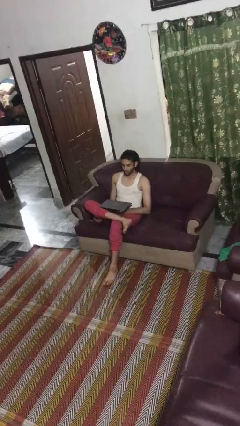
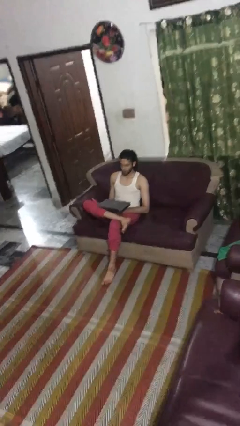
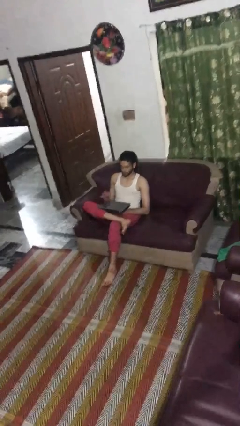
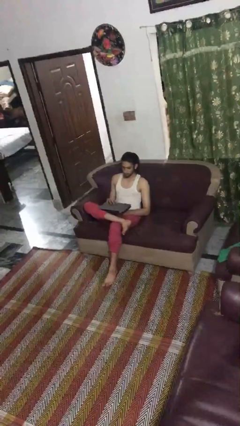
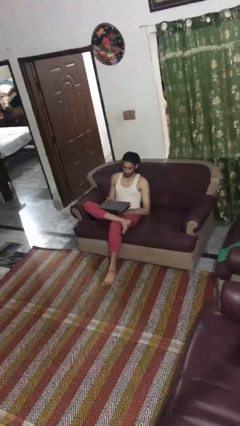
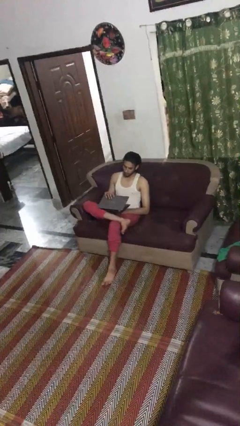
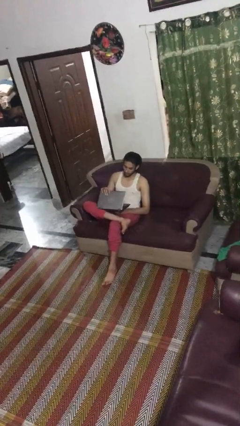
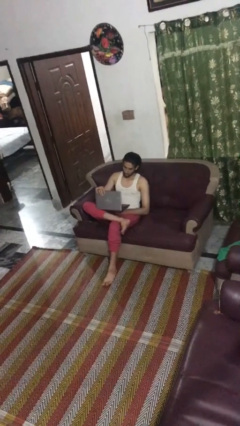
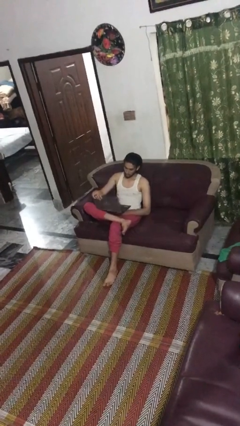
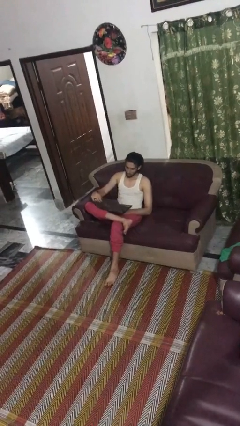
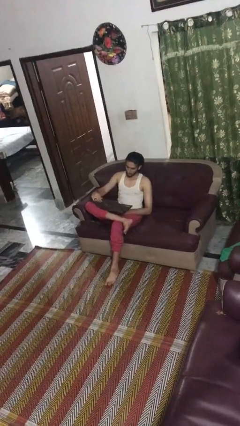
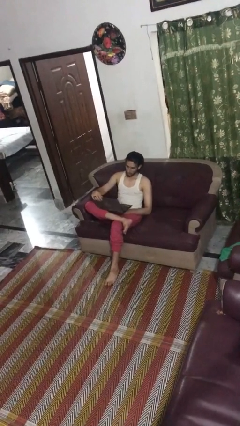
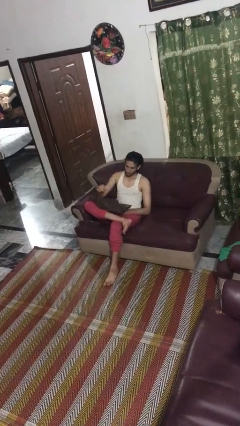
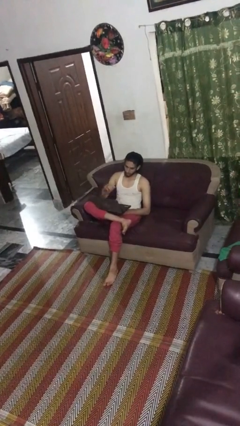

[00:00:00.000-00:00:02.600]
person opens laptop

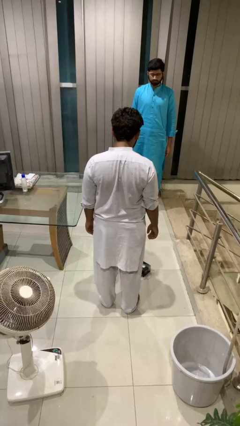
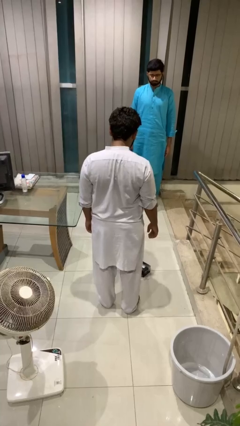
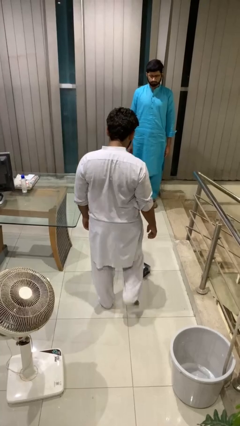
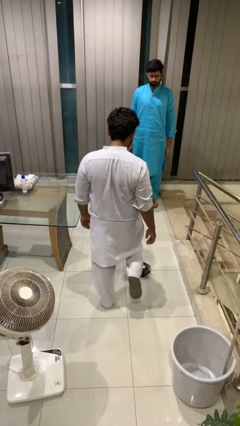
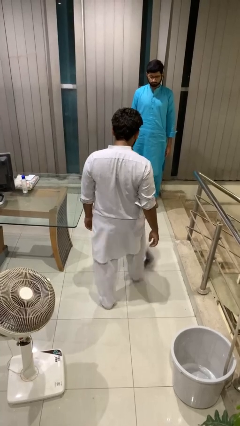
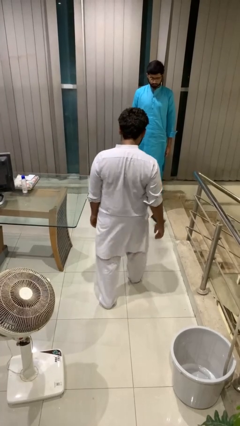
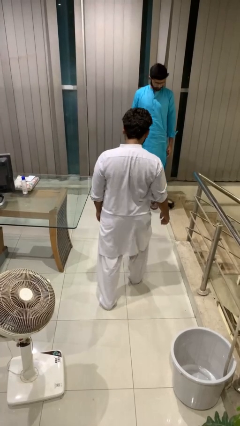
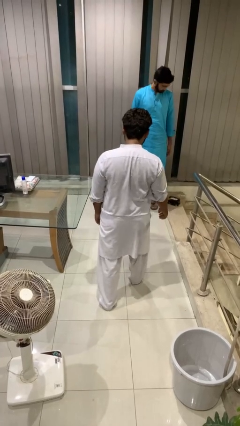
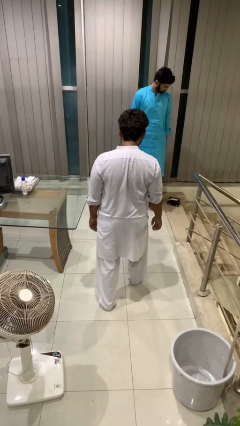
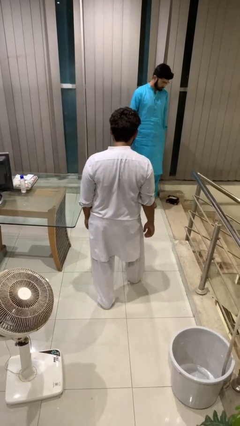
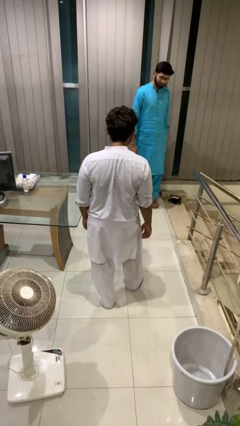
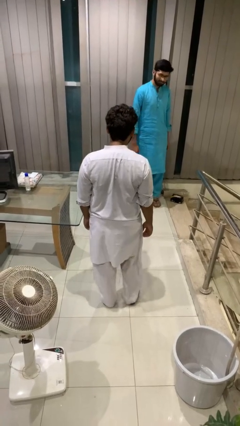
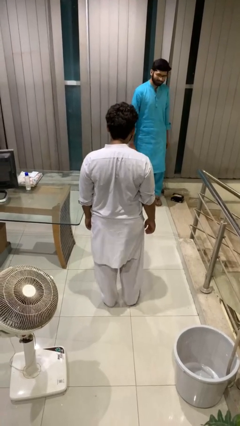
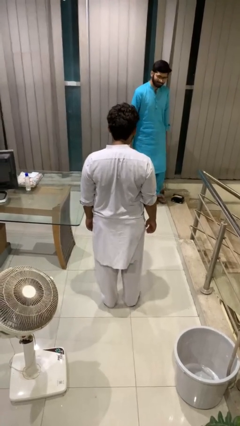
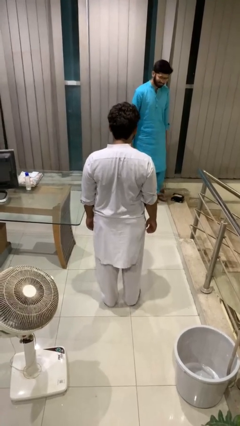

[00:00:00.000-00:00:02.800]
person kicks object to person

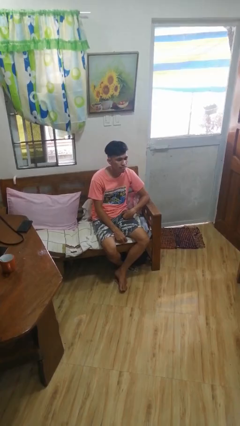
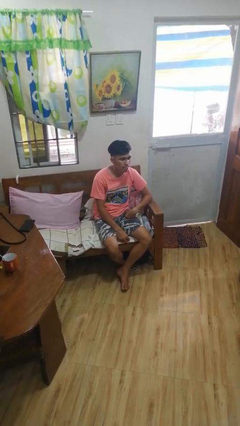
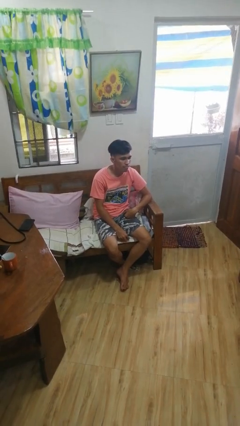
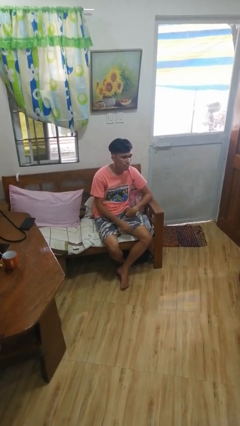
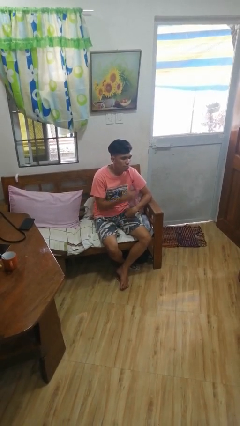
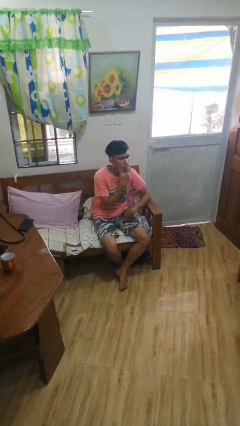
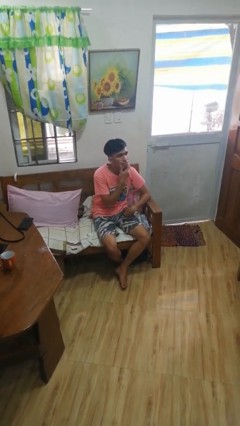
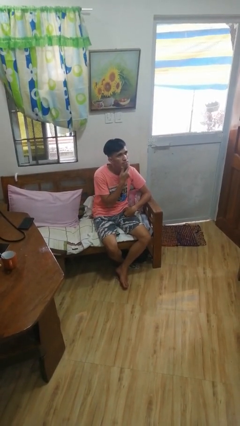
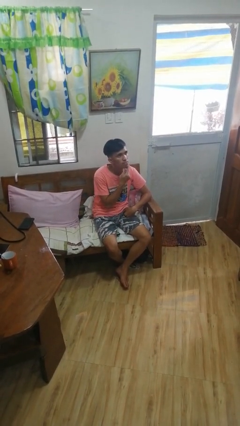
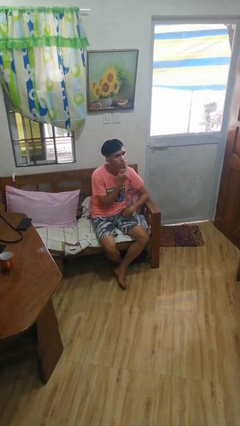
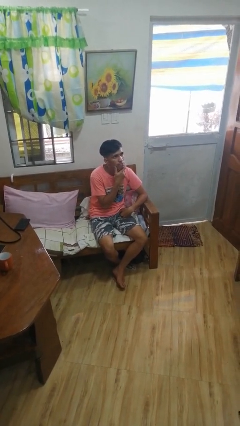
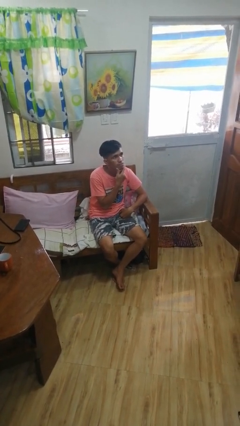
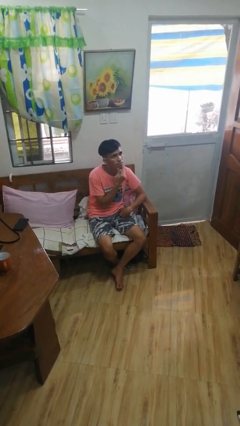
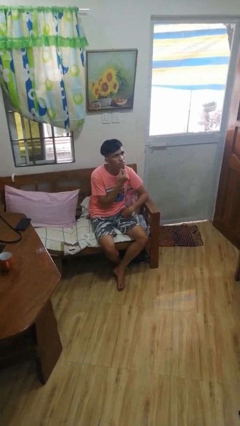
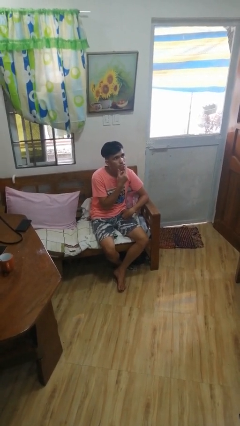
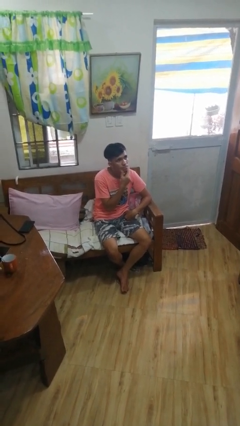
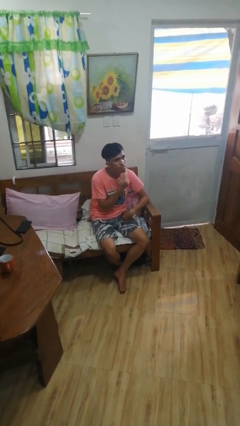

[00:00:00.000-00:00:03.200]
person strokes chin

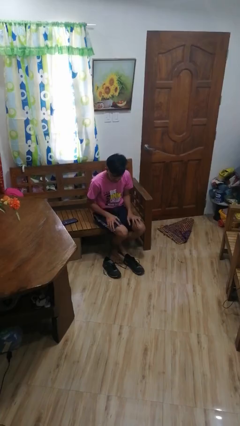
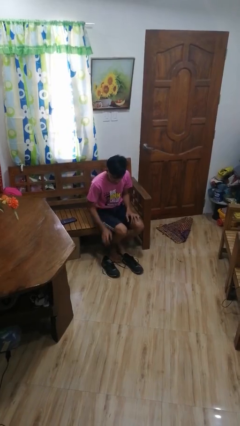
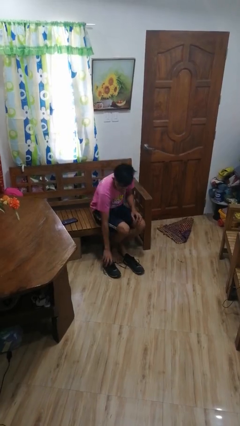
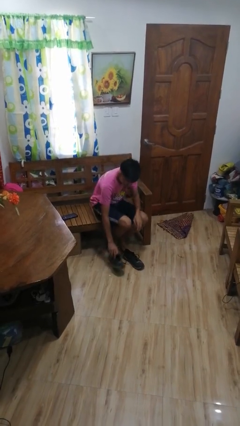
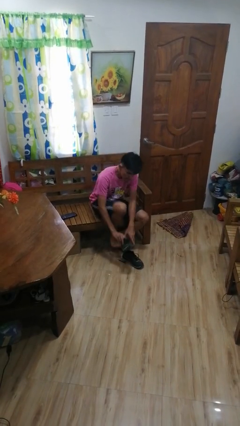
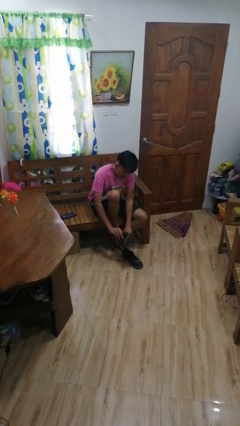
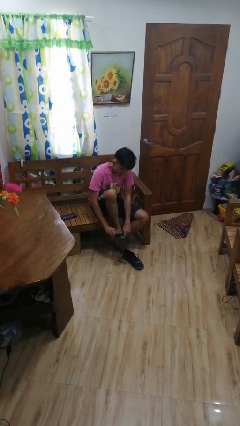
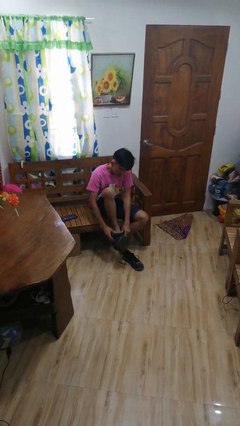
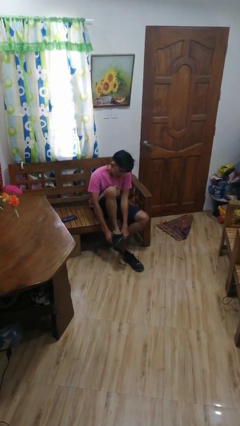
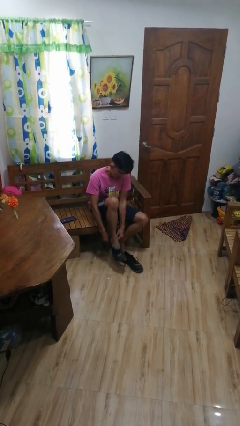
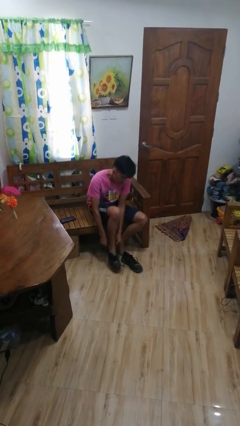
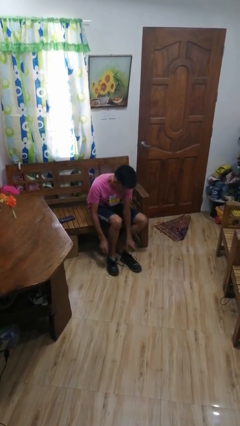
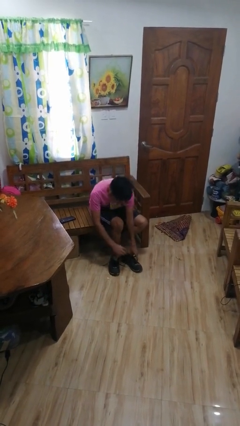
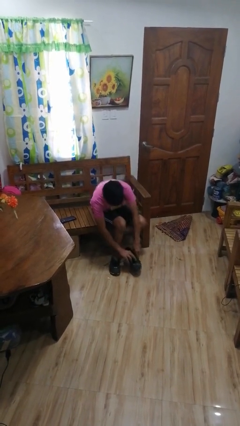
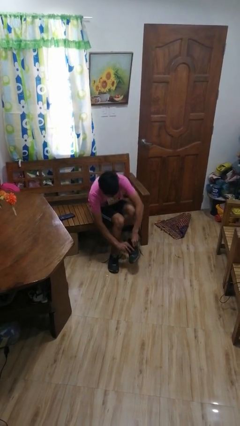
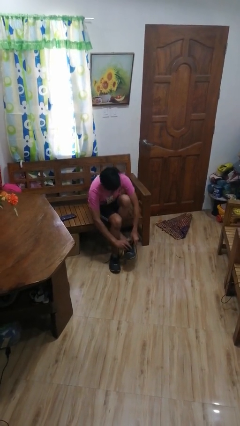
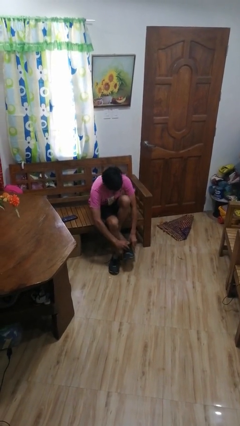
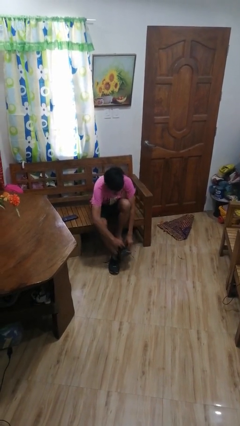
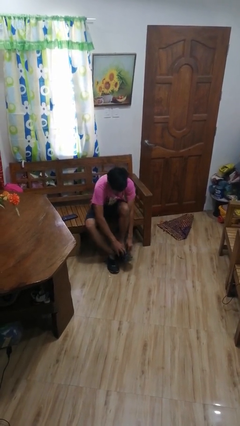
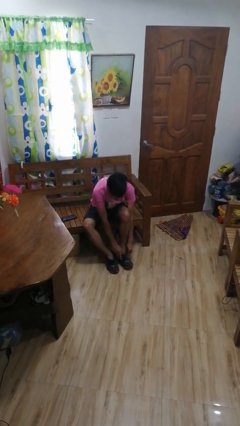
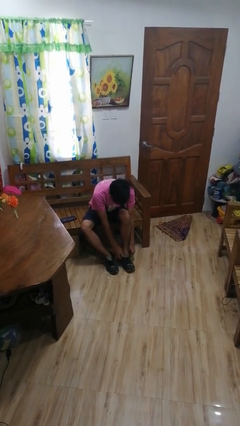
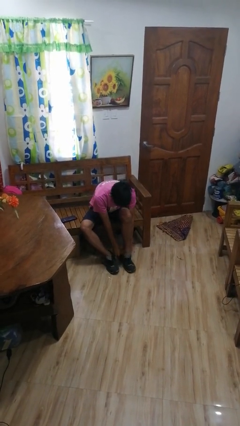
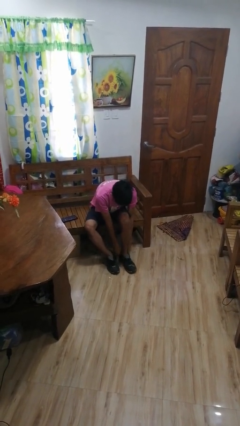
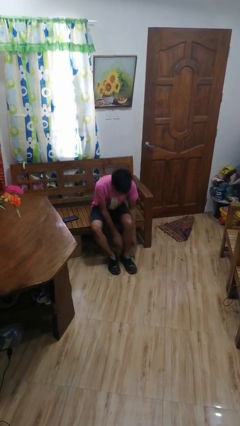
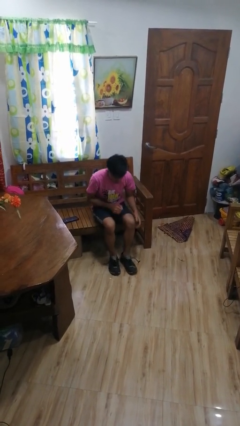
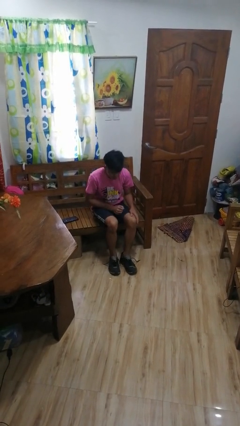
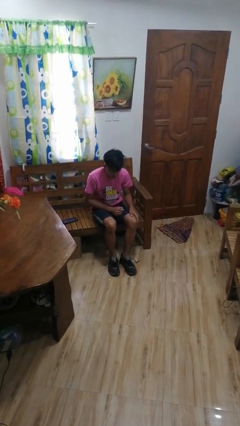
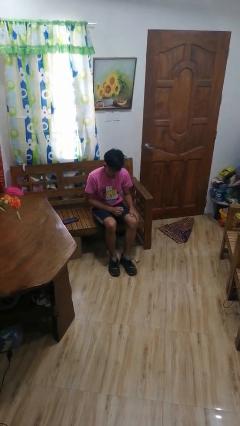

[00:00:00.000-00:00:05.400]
person puts on shoes

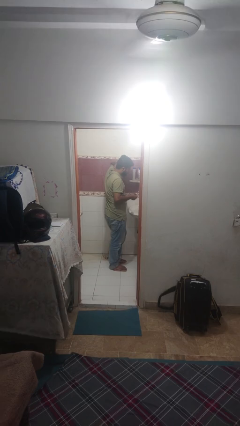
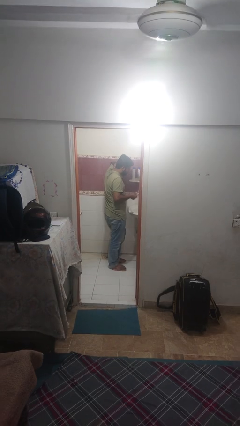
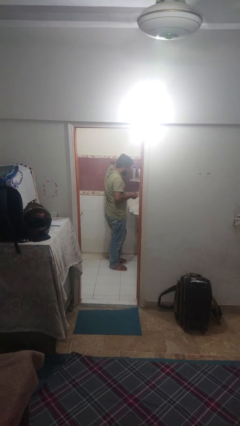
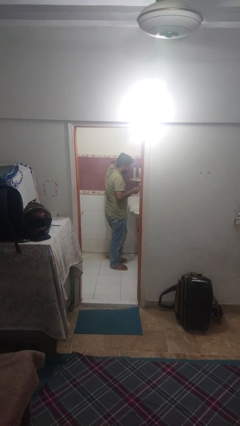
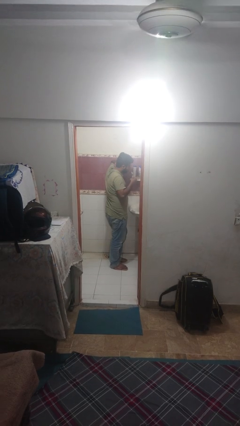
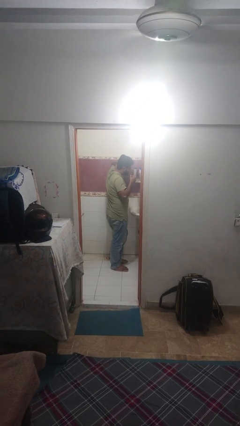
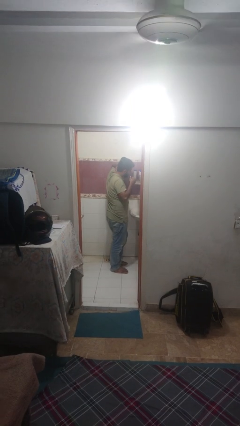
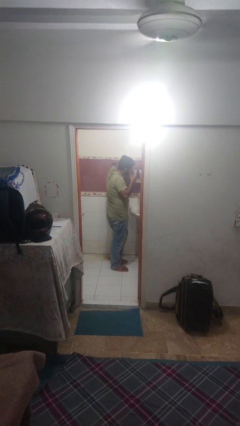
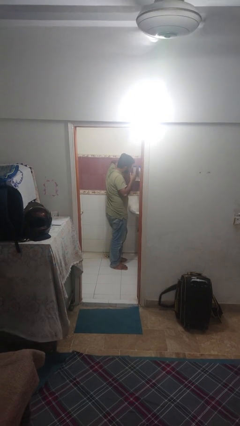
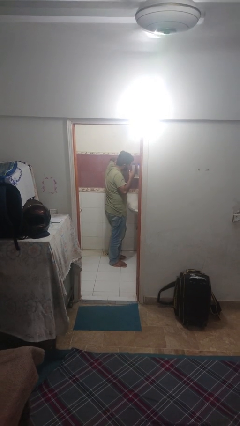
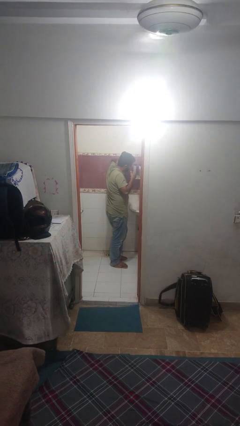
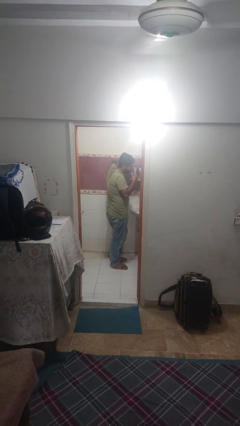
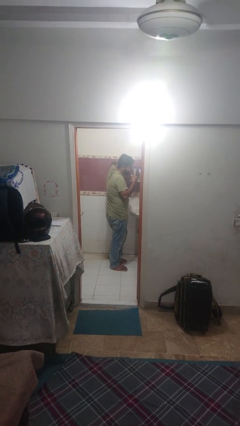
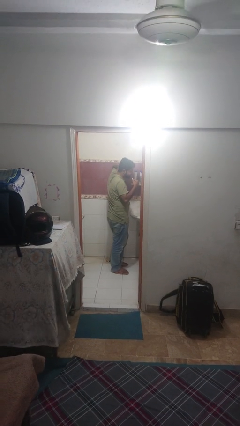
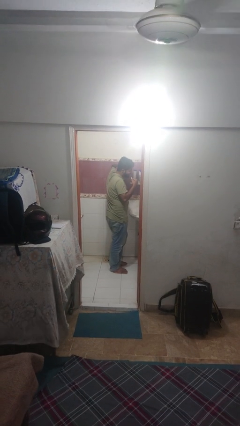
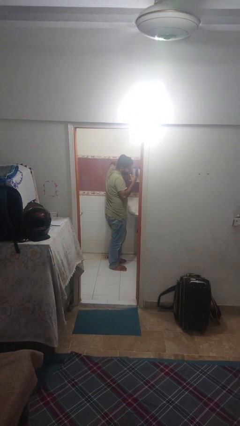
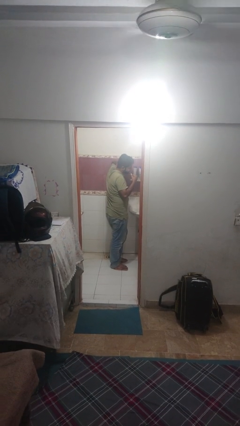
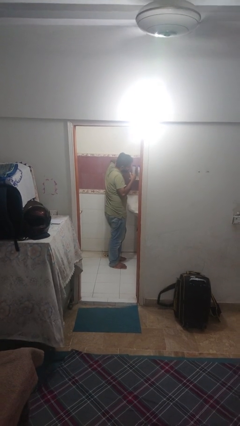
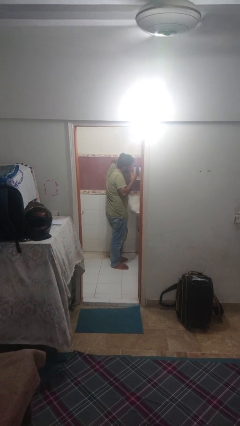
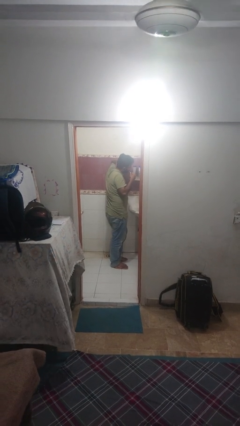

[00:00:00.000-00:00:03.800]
person brushes teeth
